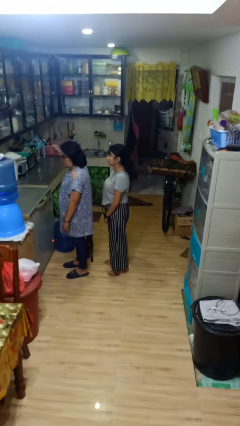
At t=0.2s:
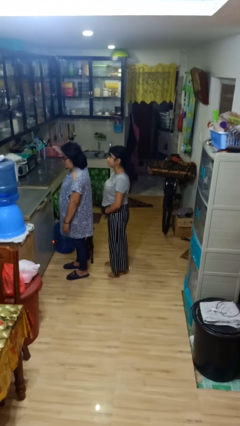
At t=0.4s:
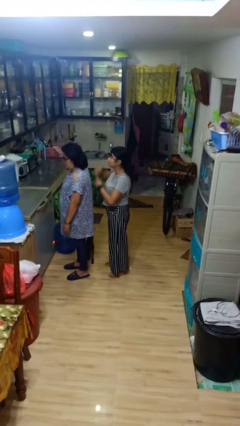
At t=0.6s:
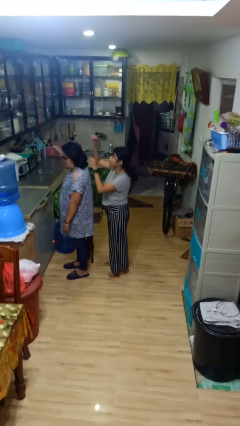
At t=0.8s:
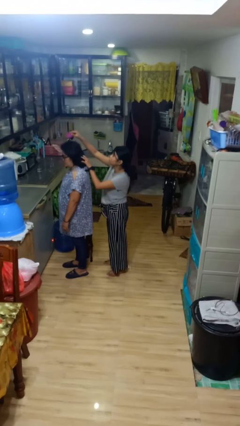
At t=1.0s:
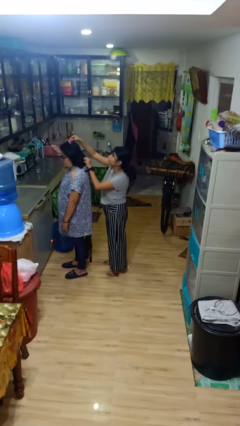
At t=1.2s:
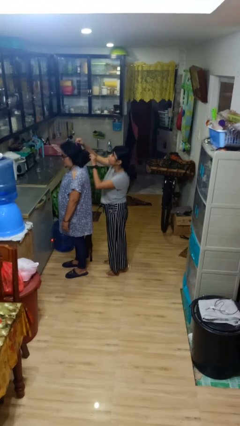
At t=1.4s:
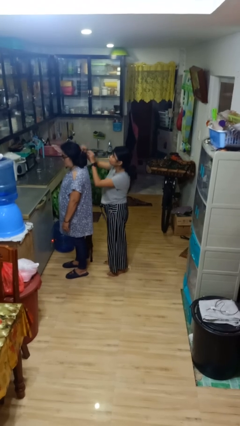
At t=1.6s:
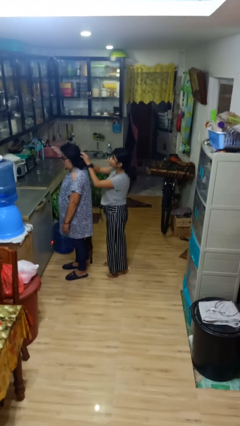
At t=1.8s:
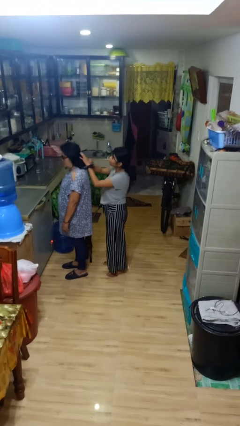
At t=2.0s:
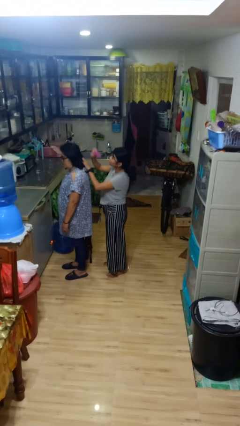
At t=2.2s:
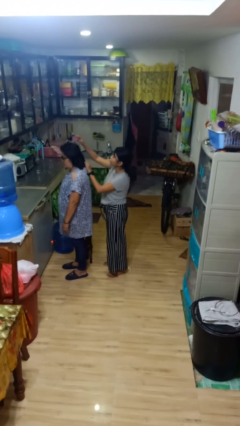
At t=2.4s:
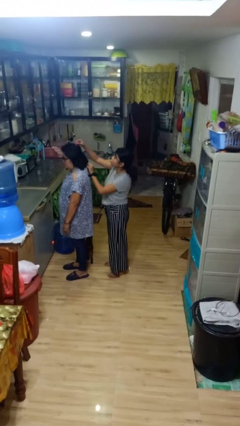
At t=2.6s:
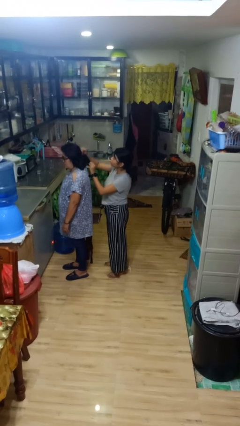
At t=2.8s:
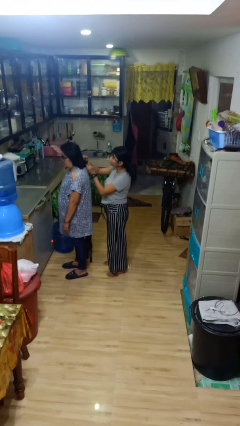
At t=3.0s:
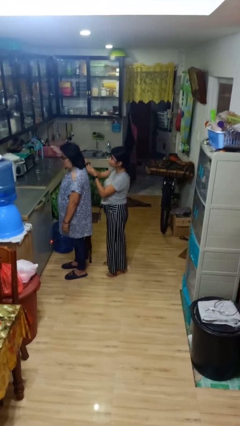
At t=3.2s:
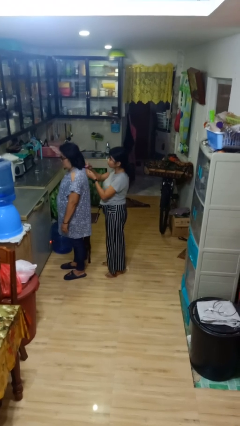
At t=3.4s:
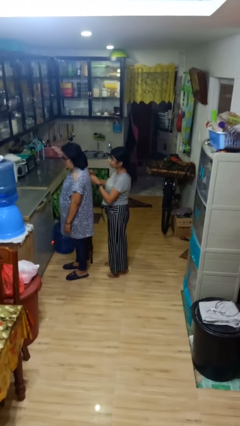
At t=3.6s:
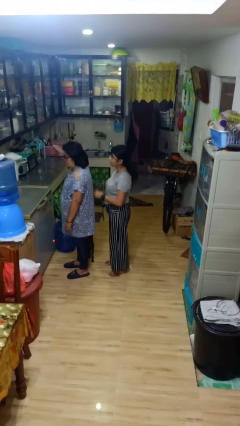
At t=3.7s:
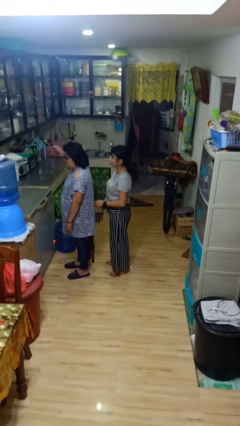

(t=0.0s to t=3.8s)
person brushes hair of person

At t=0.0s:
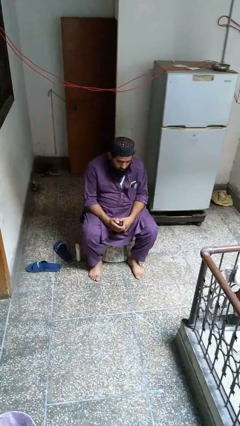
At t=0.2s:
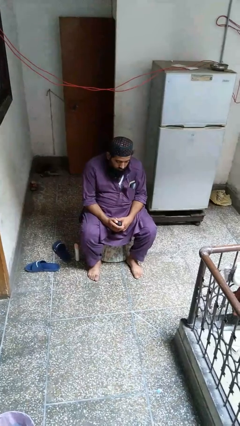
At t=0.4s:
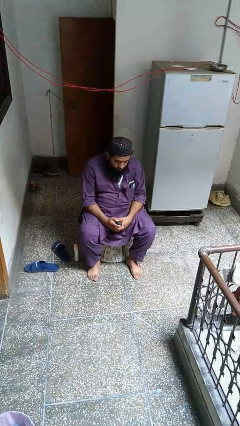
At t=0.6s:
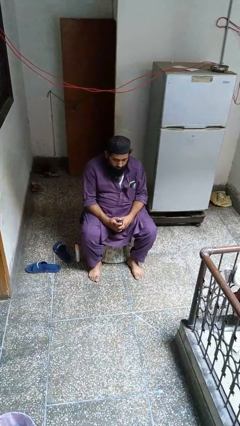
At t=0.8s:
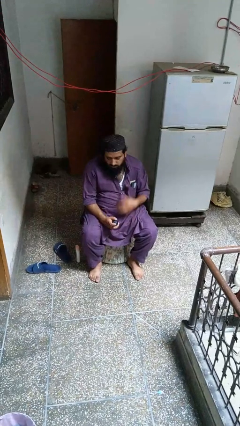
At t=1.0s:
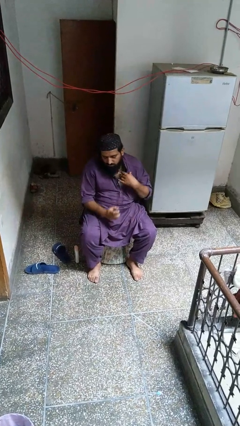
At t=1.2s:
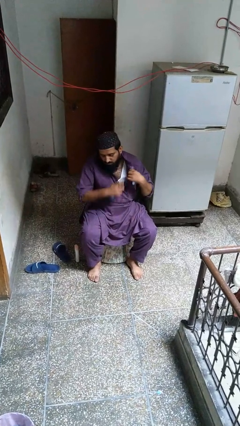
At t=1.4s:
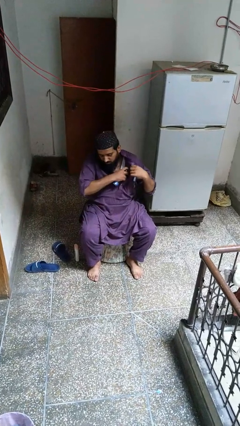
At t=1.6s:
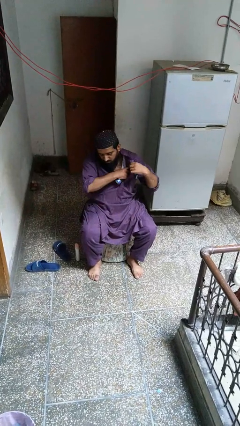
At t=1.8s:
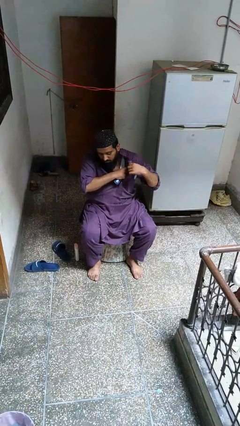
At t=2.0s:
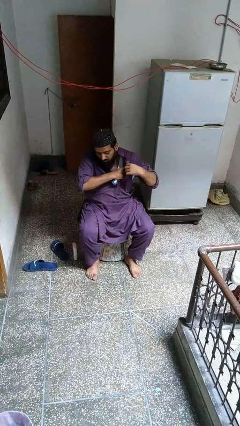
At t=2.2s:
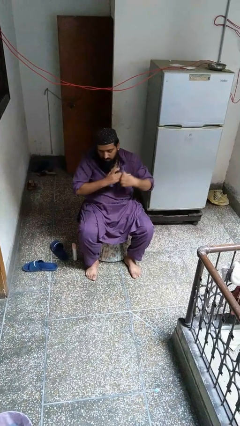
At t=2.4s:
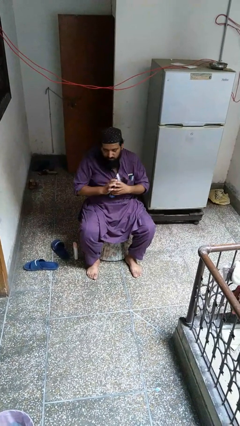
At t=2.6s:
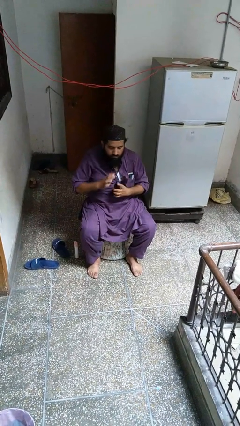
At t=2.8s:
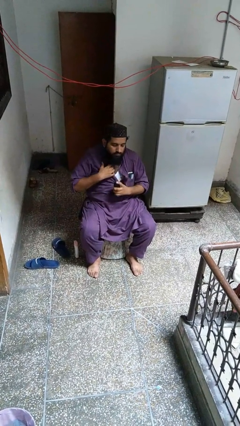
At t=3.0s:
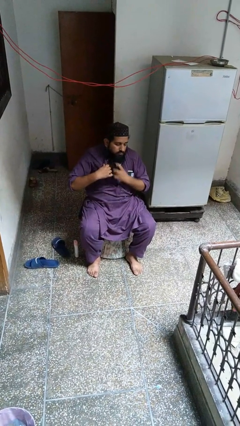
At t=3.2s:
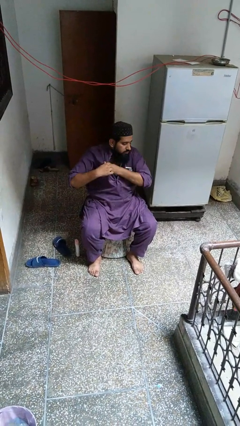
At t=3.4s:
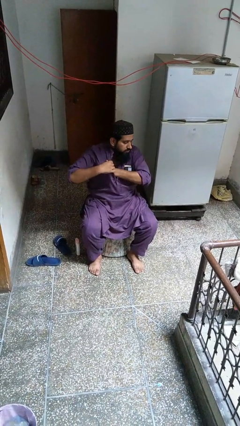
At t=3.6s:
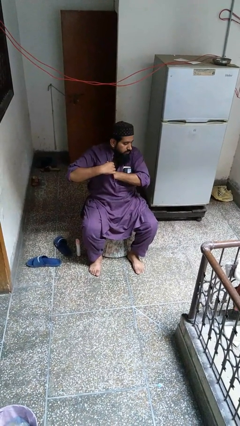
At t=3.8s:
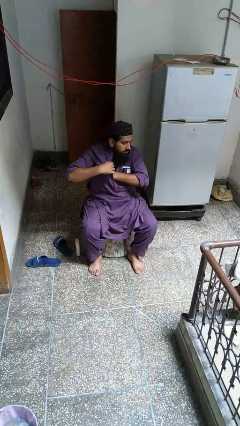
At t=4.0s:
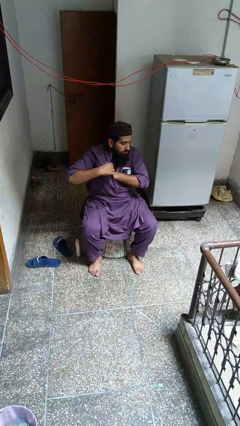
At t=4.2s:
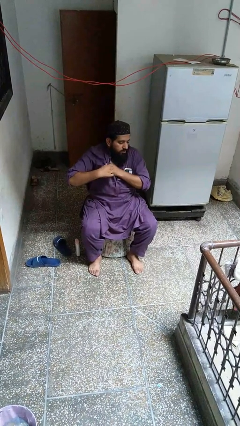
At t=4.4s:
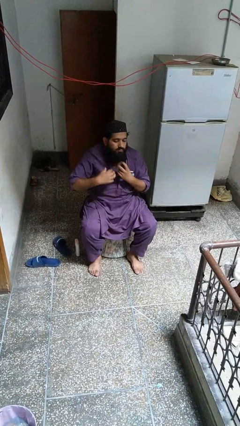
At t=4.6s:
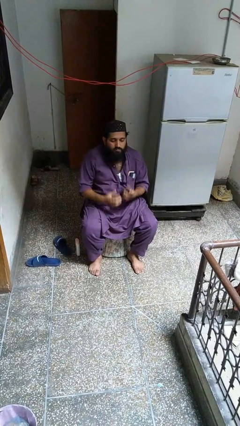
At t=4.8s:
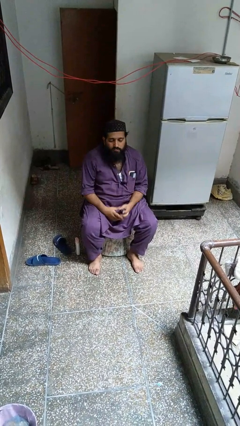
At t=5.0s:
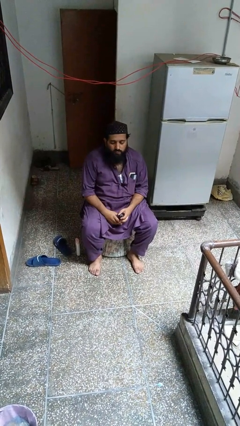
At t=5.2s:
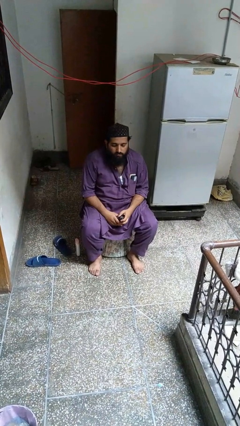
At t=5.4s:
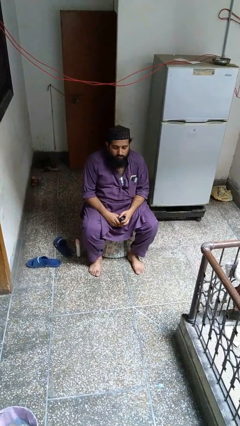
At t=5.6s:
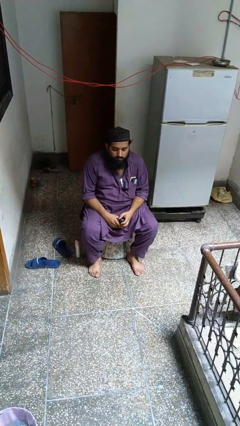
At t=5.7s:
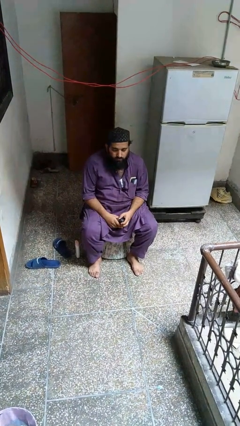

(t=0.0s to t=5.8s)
person applies deodorant

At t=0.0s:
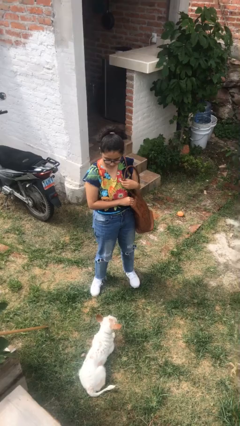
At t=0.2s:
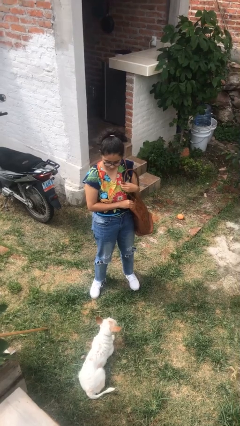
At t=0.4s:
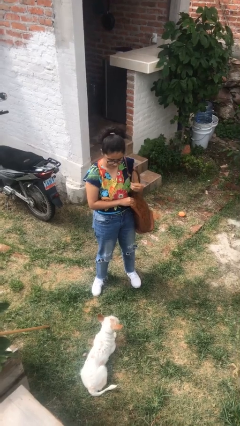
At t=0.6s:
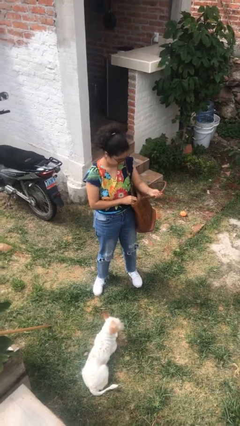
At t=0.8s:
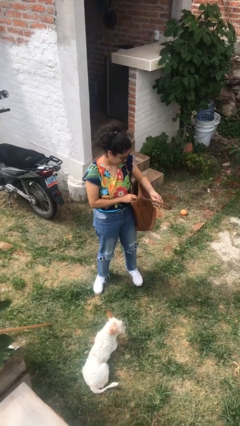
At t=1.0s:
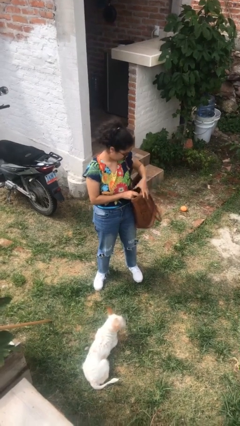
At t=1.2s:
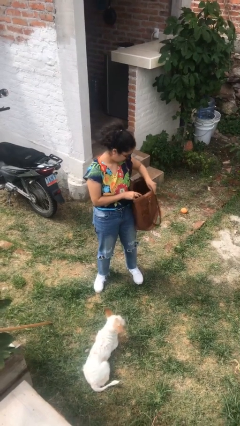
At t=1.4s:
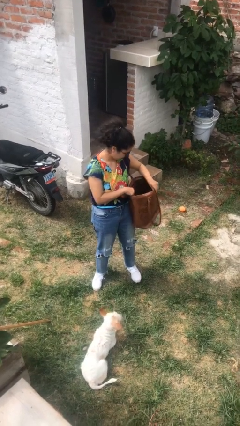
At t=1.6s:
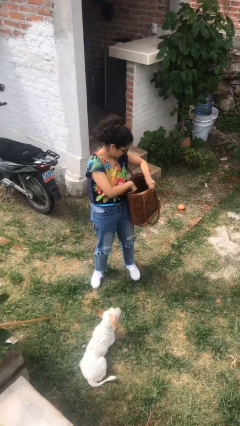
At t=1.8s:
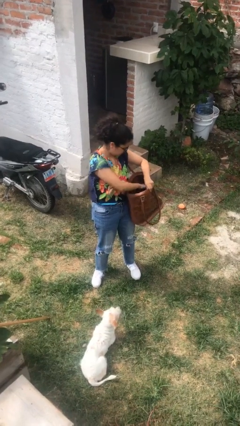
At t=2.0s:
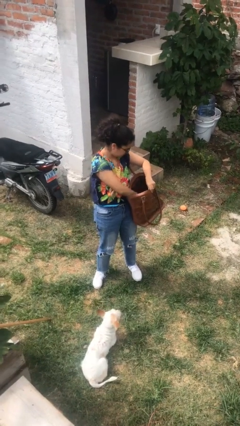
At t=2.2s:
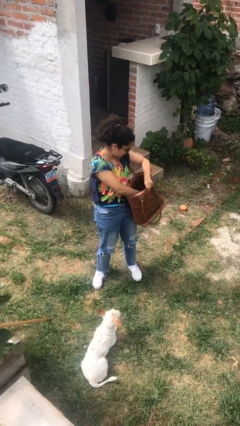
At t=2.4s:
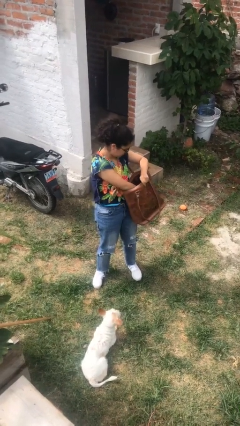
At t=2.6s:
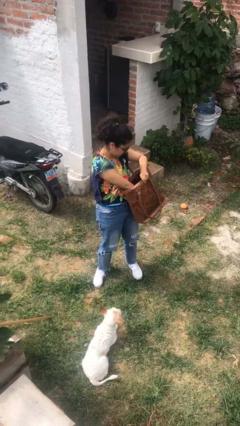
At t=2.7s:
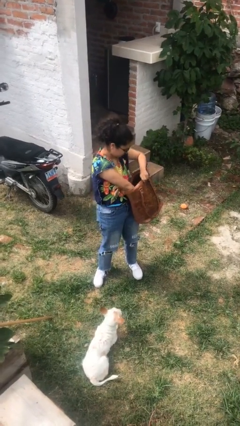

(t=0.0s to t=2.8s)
person searches in purse

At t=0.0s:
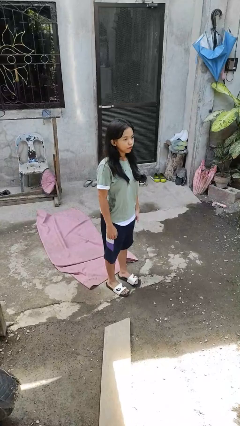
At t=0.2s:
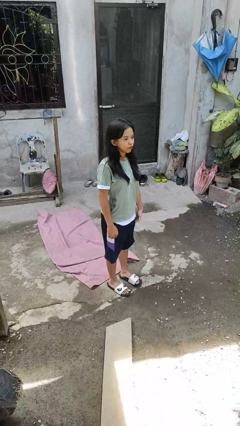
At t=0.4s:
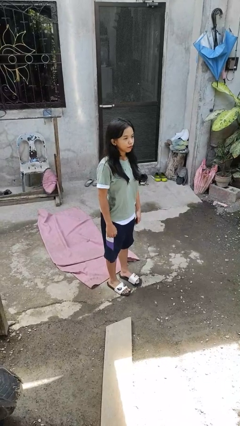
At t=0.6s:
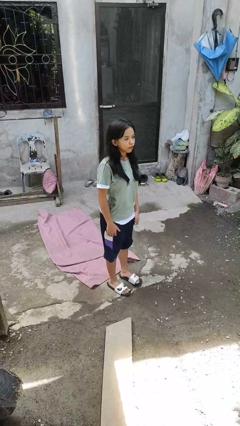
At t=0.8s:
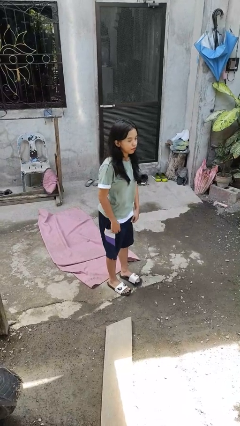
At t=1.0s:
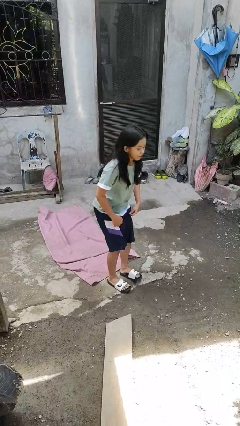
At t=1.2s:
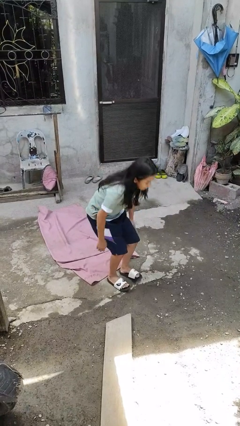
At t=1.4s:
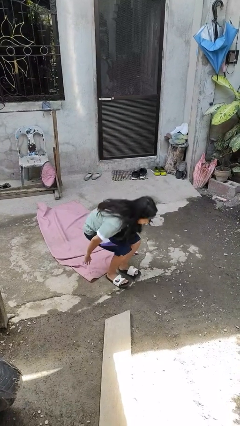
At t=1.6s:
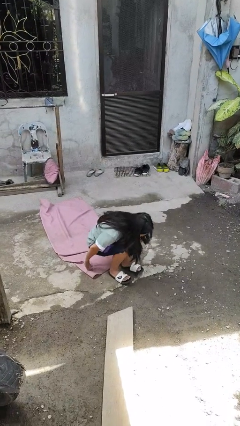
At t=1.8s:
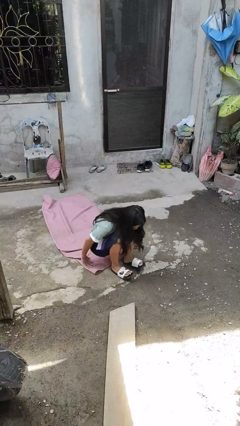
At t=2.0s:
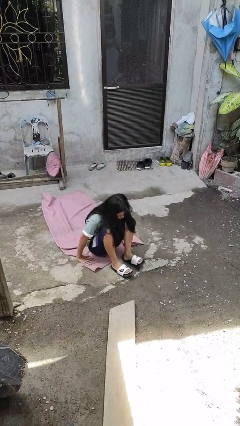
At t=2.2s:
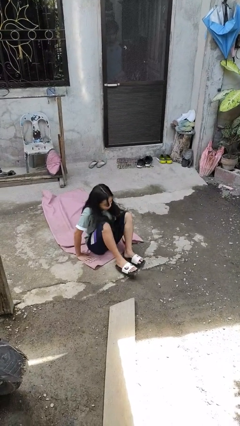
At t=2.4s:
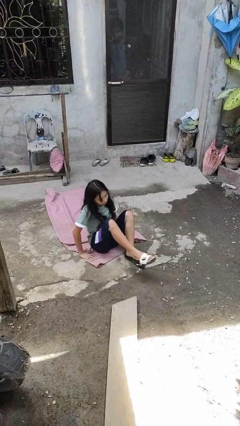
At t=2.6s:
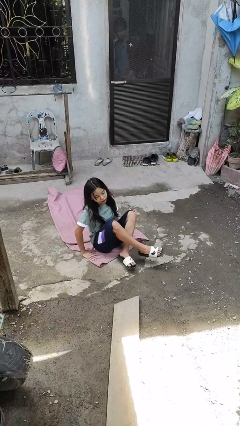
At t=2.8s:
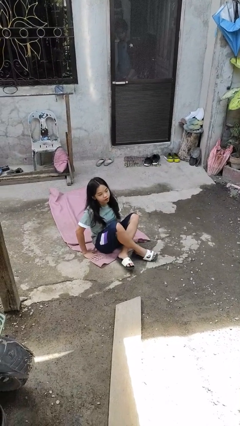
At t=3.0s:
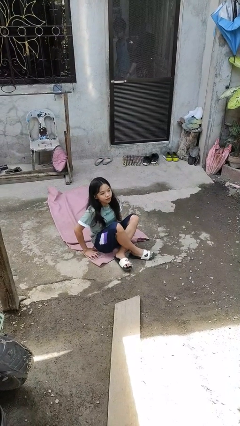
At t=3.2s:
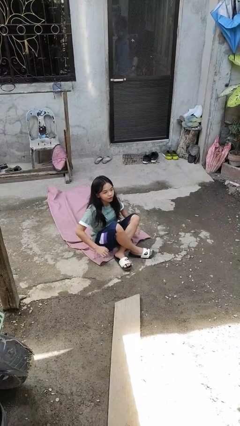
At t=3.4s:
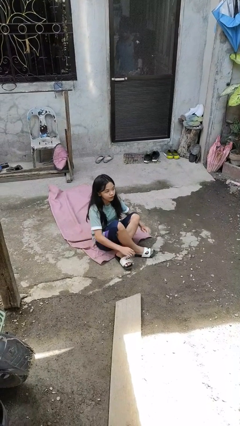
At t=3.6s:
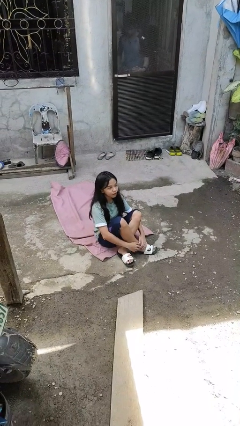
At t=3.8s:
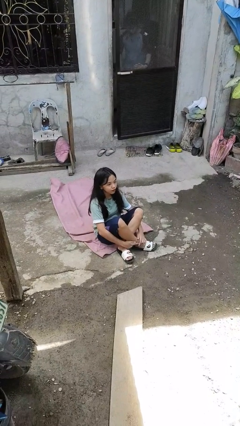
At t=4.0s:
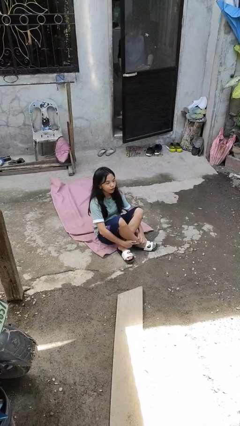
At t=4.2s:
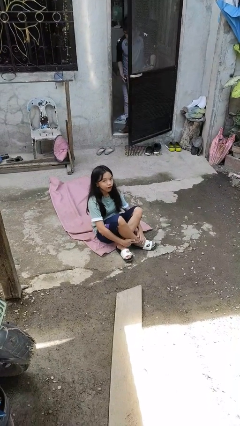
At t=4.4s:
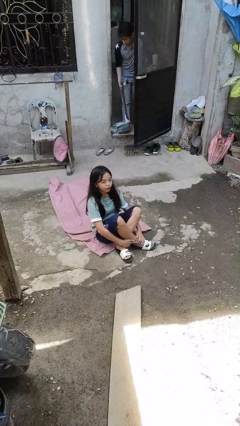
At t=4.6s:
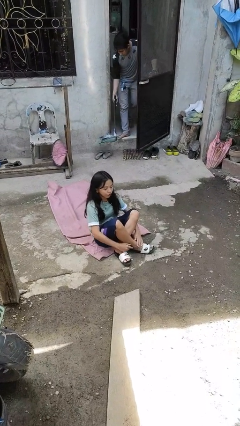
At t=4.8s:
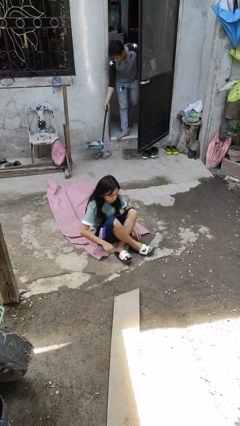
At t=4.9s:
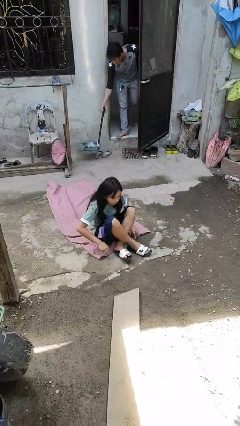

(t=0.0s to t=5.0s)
person sits crisscross

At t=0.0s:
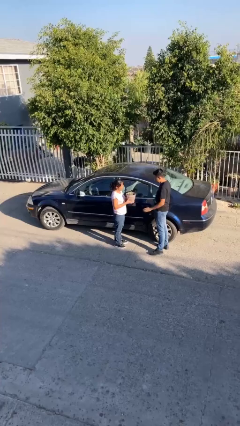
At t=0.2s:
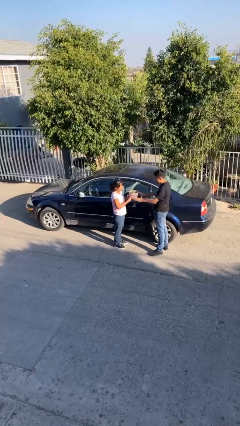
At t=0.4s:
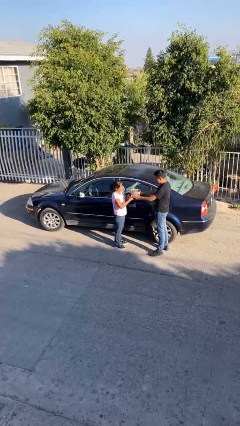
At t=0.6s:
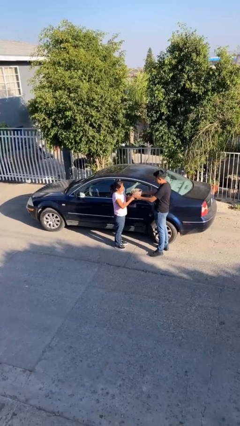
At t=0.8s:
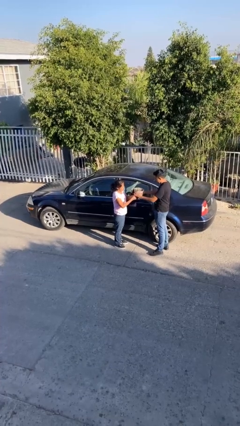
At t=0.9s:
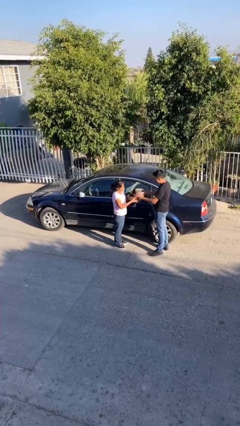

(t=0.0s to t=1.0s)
person transfers object to person
